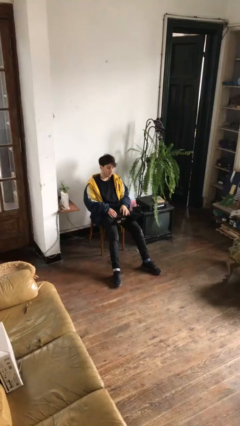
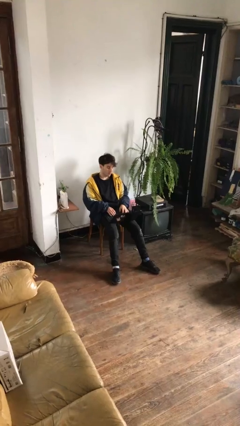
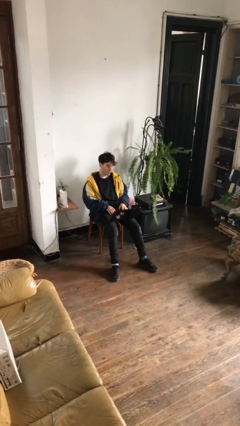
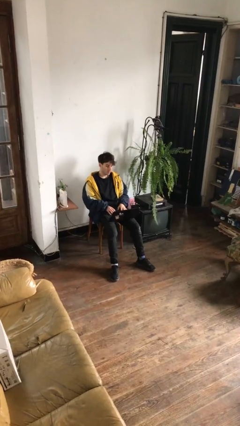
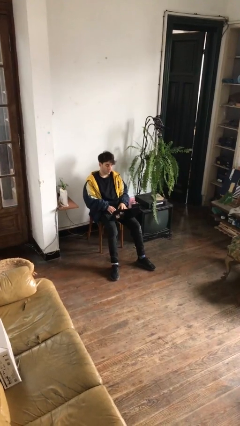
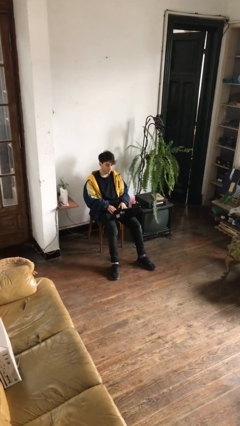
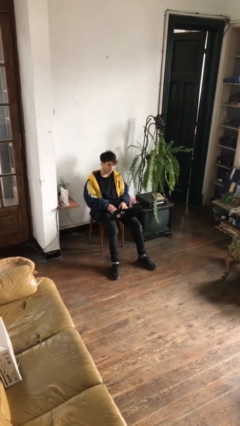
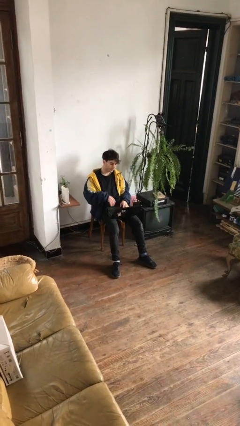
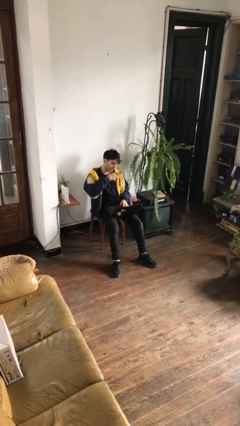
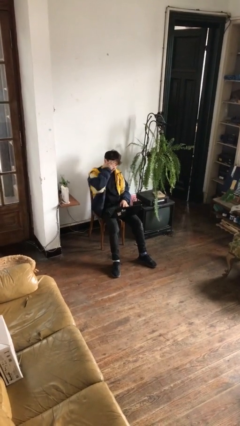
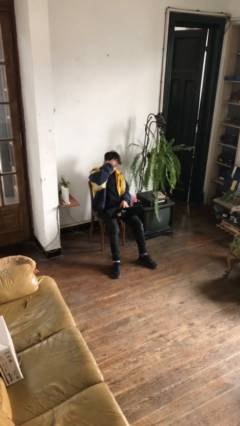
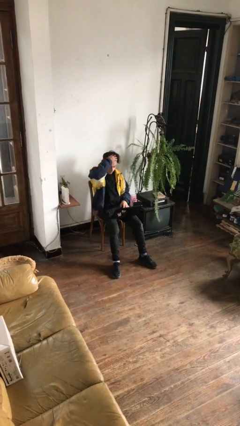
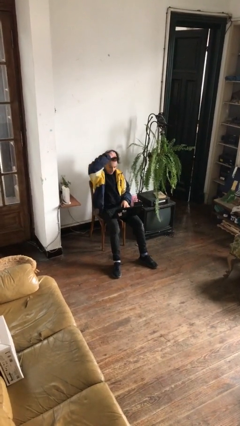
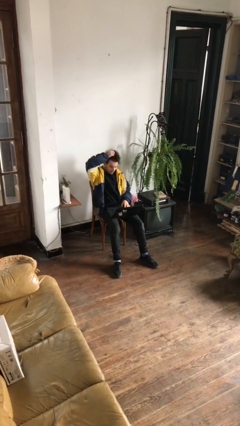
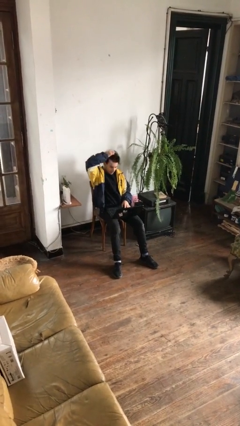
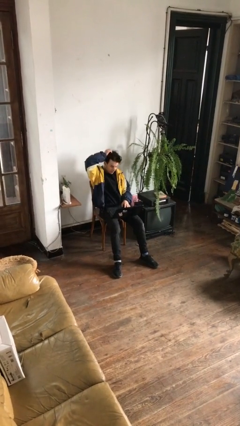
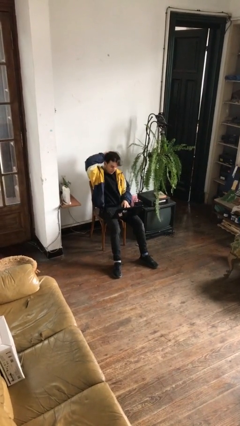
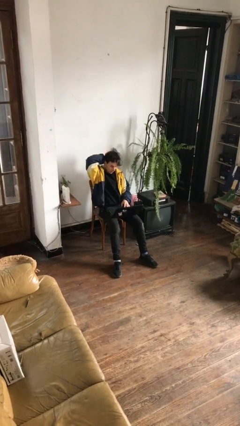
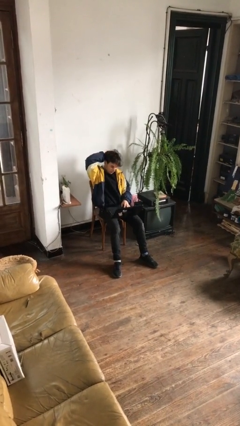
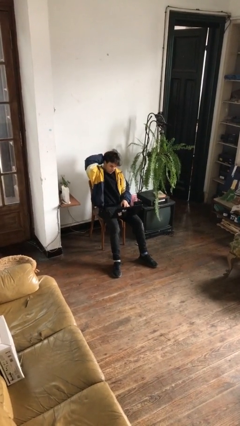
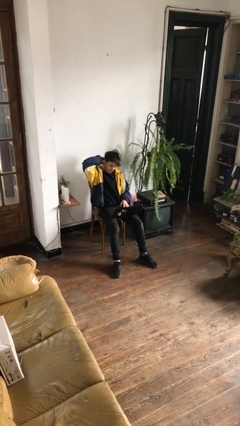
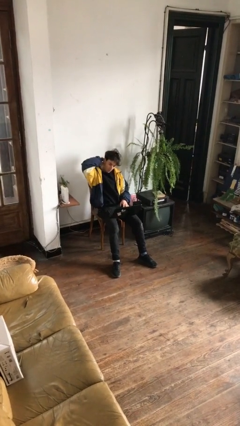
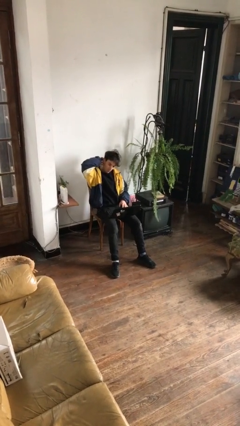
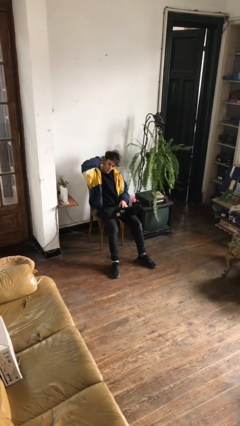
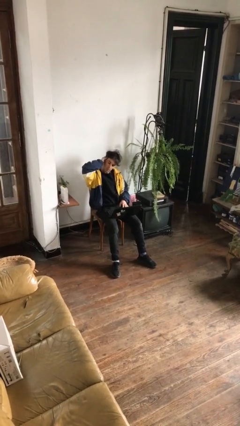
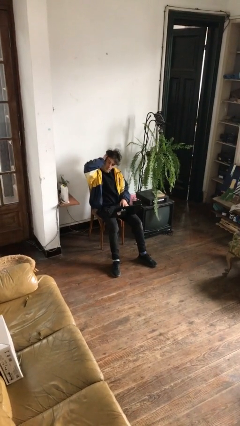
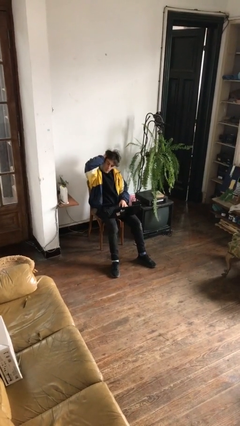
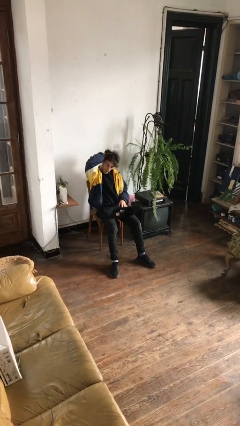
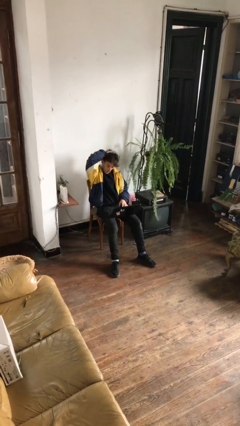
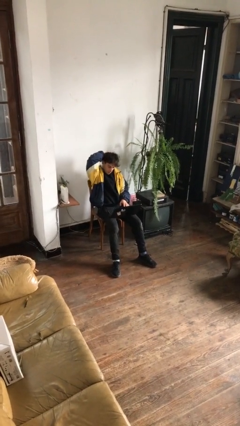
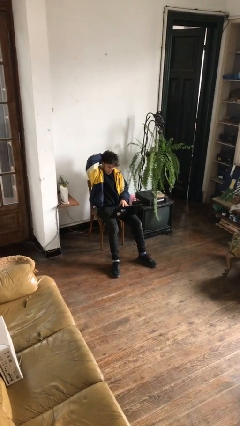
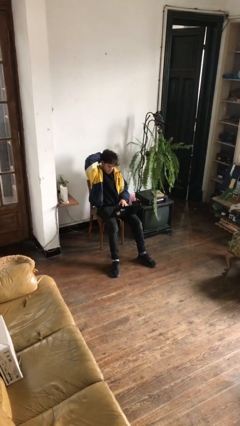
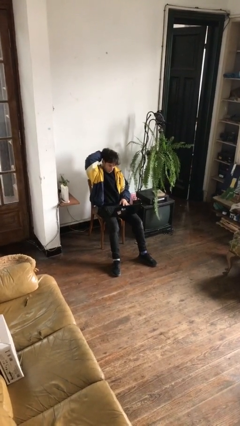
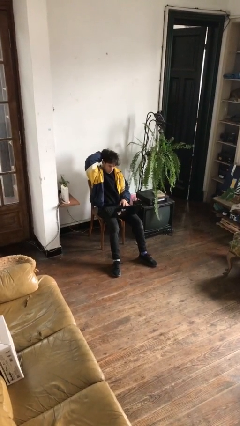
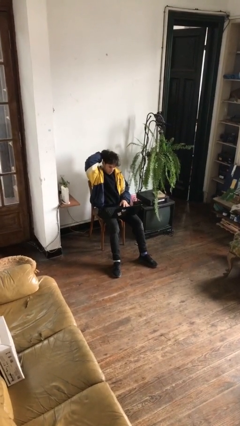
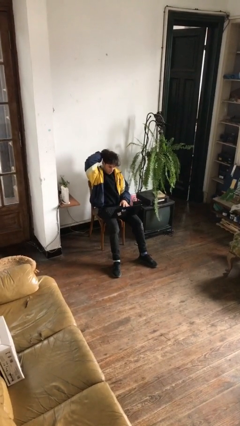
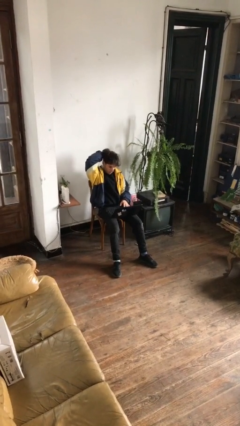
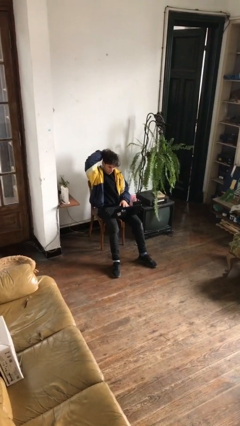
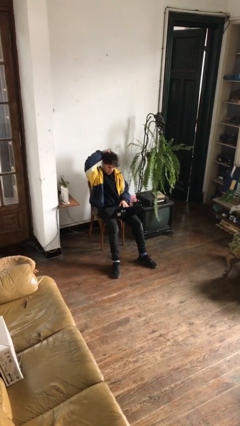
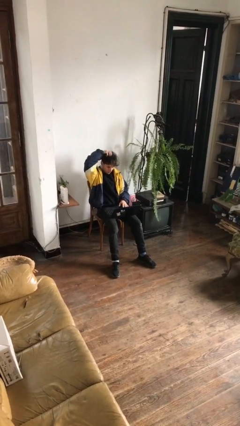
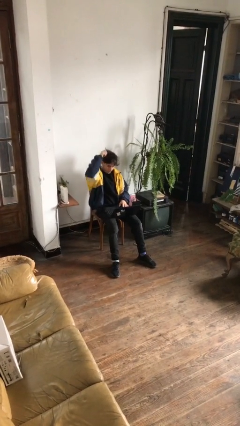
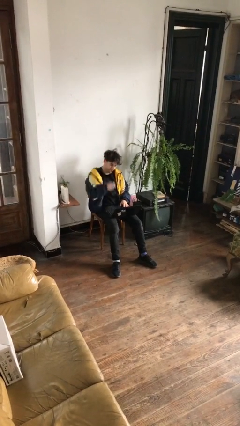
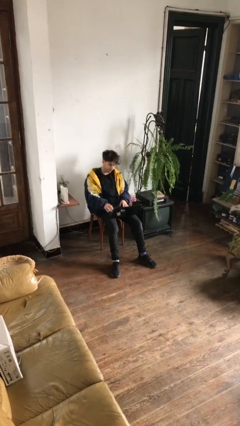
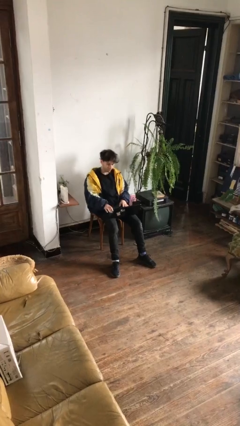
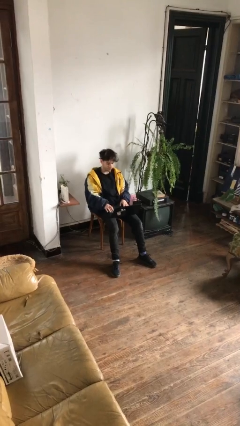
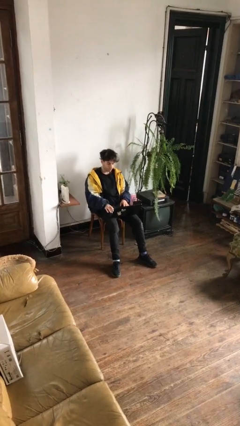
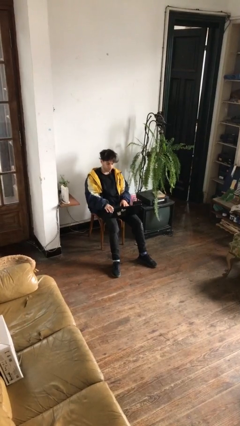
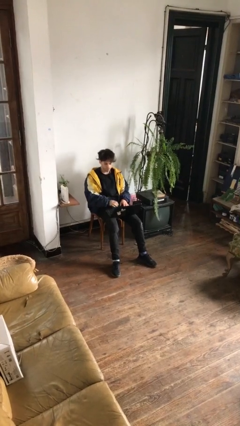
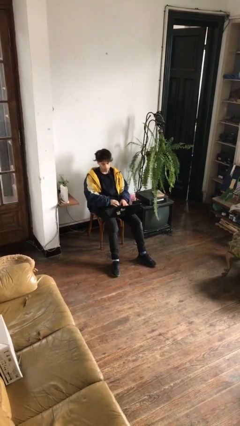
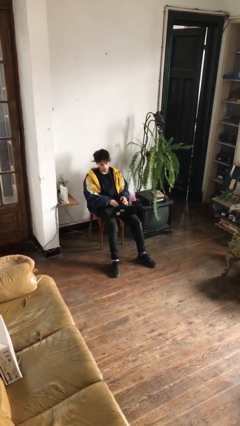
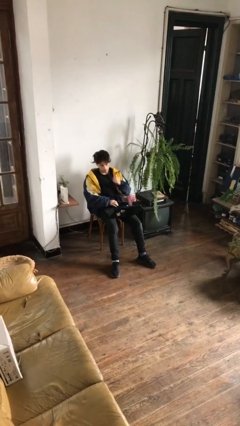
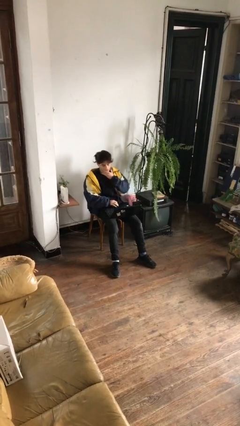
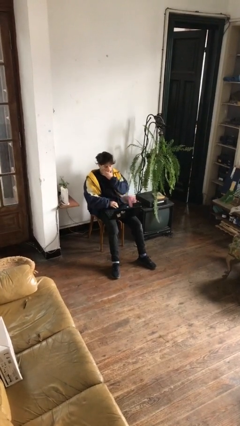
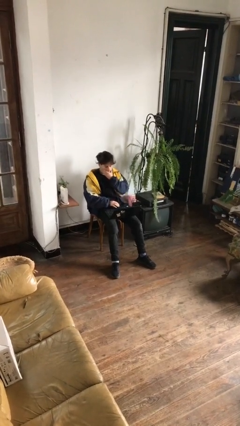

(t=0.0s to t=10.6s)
person interacts with laptop

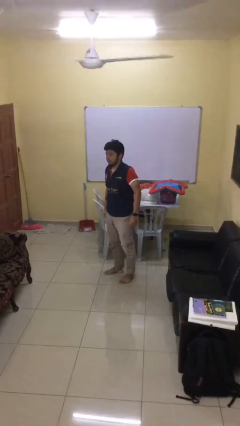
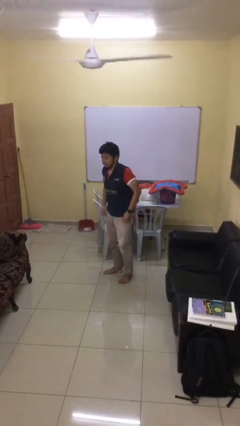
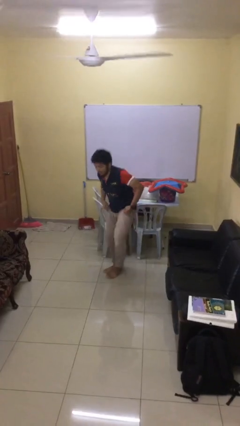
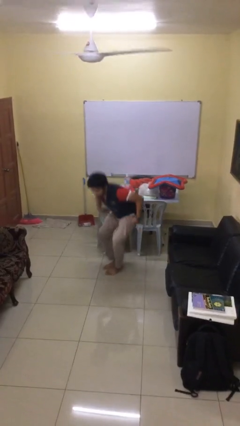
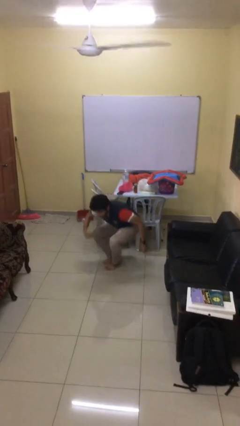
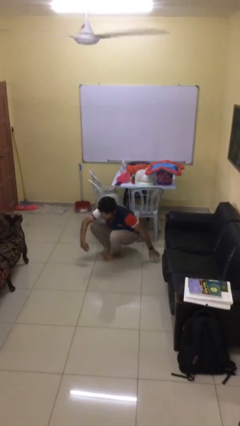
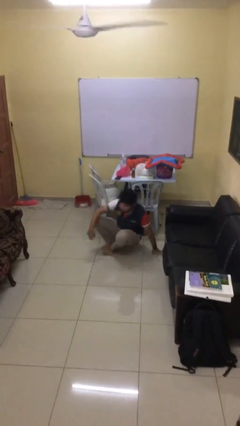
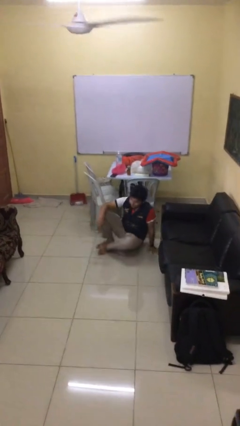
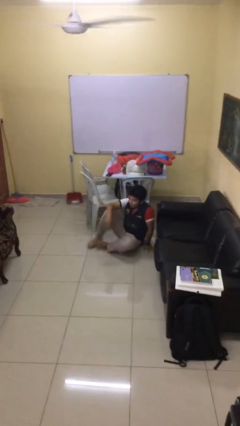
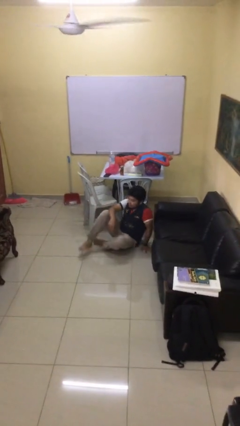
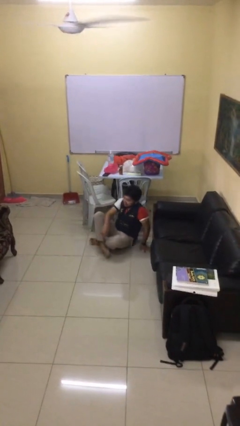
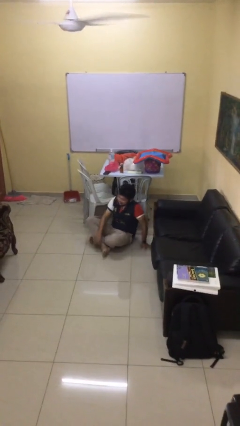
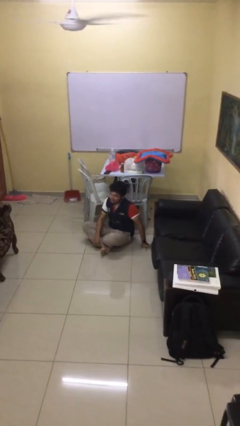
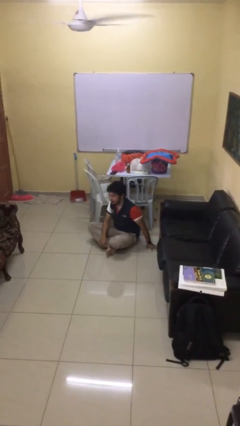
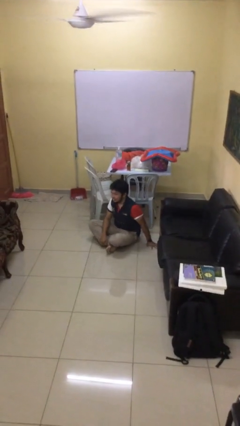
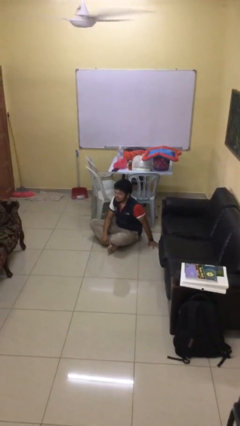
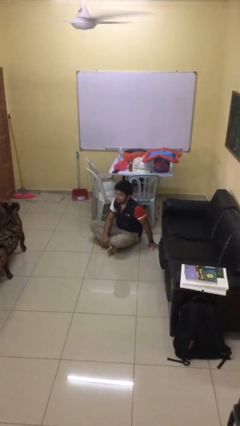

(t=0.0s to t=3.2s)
person sits crisscross

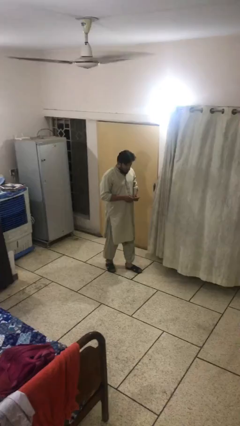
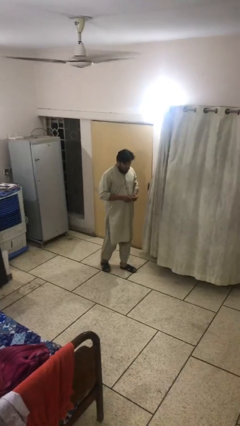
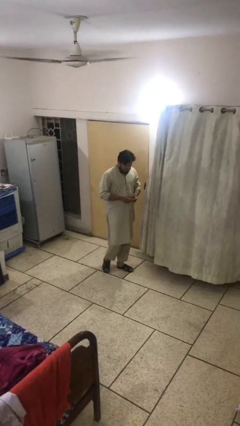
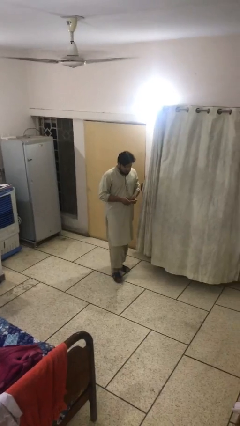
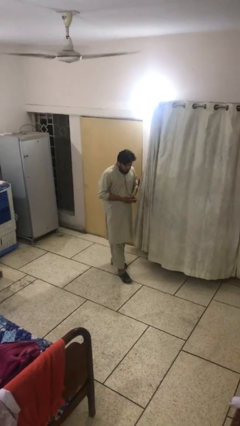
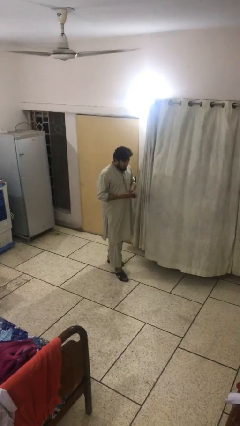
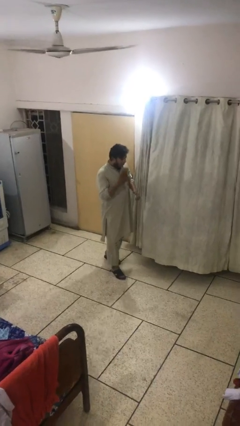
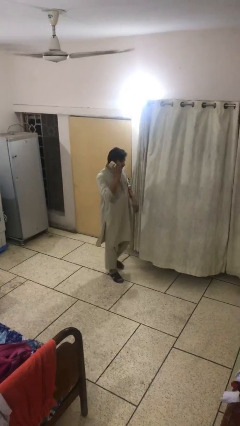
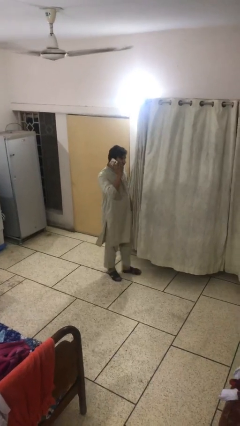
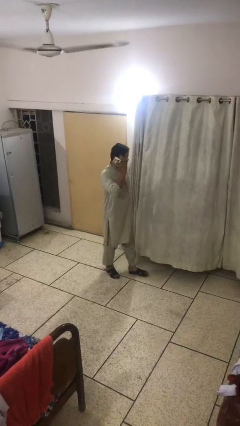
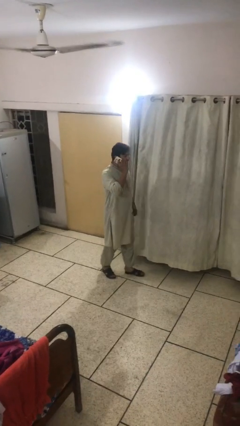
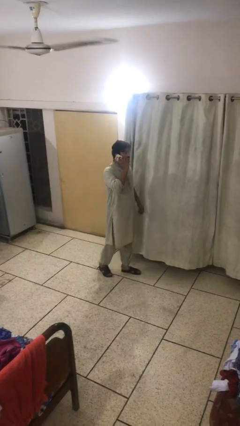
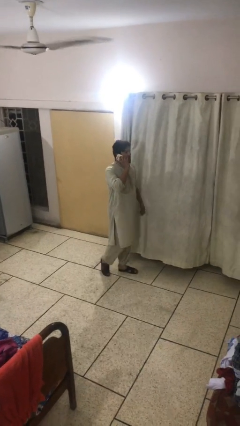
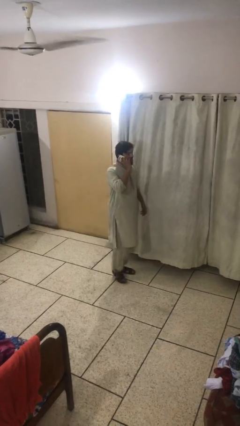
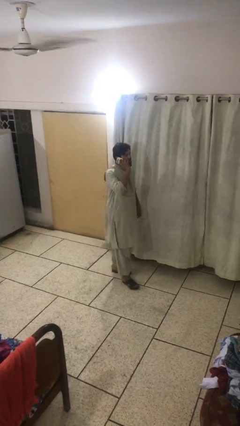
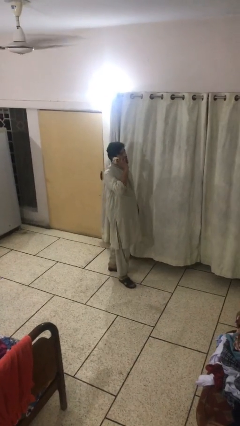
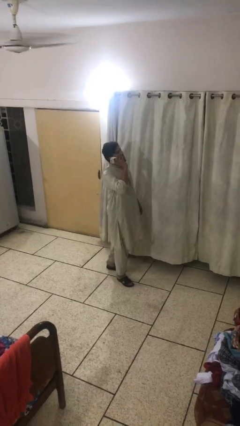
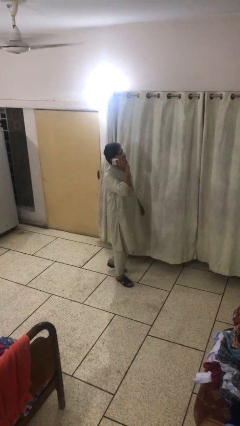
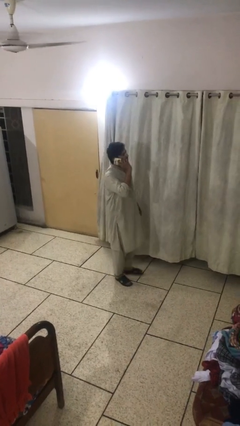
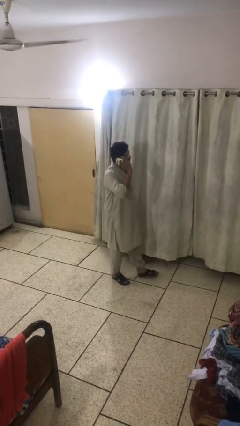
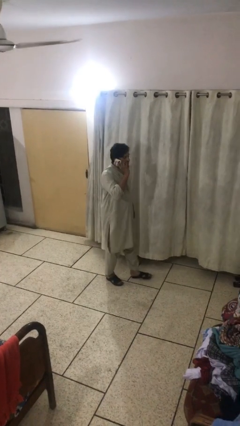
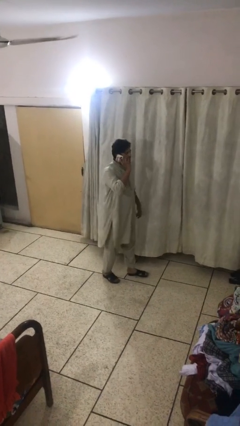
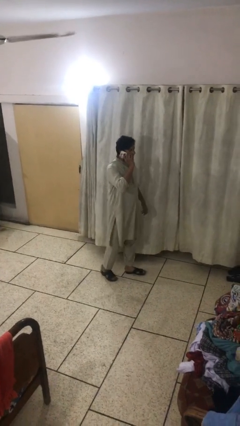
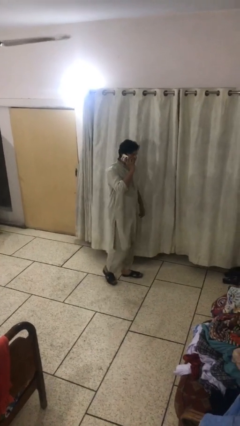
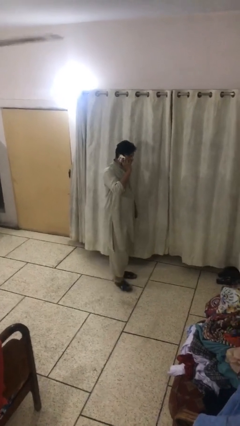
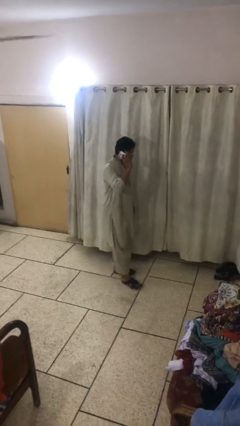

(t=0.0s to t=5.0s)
person talks on phone
